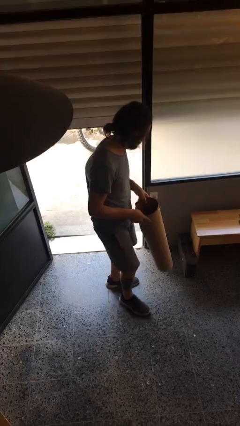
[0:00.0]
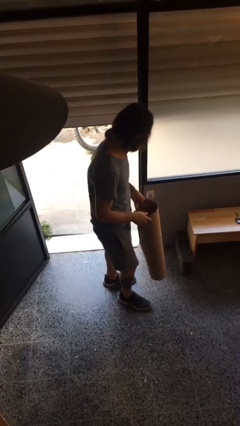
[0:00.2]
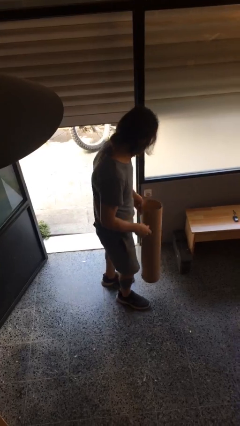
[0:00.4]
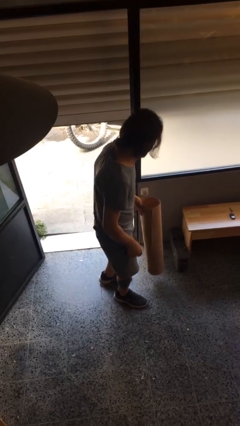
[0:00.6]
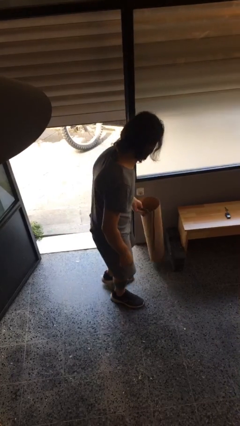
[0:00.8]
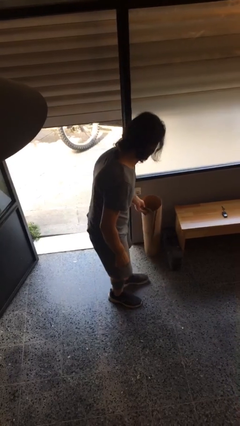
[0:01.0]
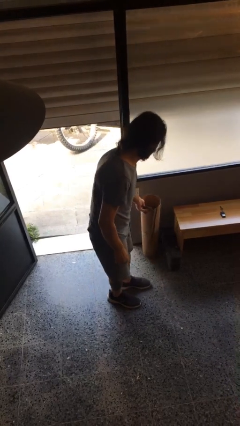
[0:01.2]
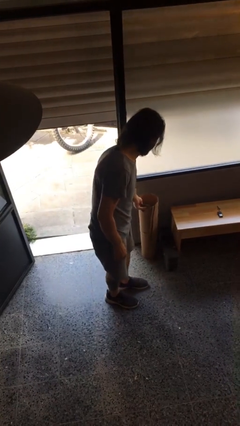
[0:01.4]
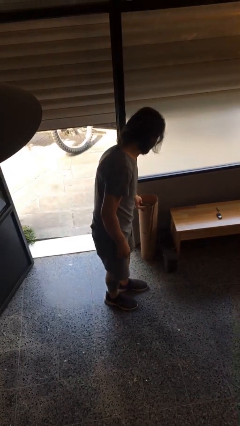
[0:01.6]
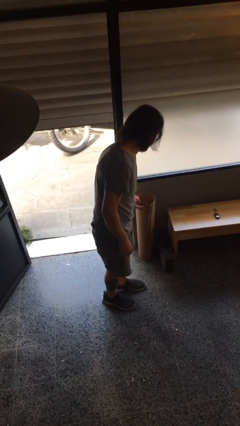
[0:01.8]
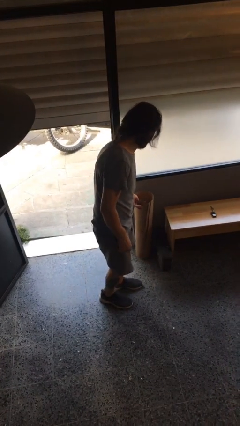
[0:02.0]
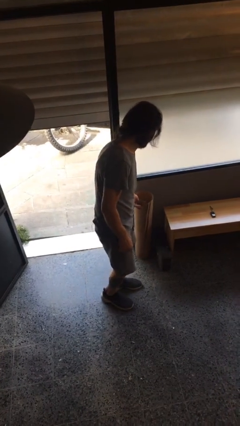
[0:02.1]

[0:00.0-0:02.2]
person puts down object on floor

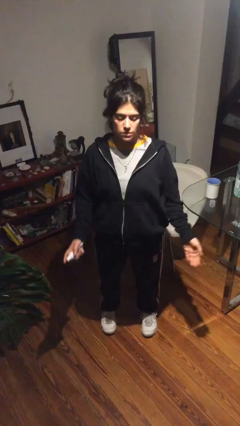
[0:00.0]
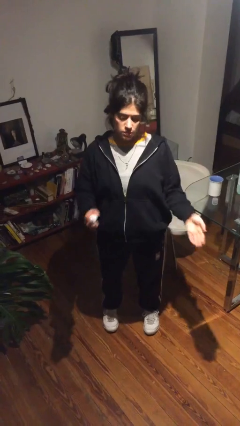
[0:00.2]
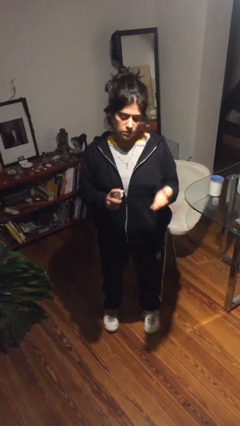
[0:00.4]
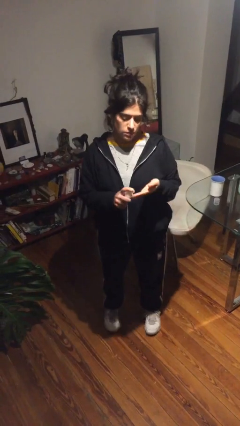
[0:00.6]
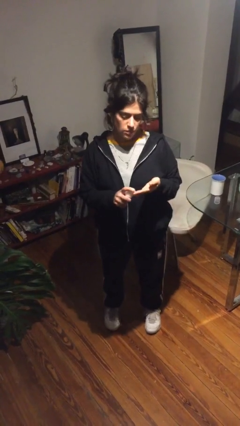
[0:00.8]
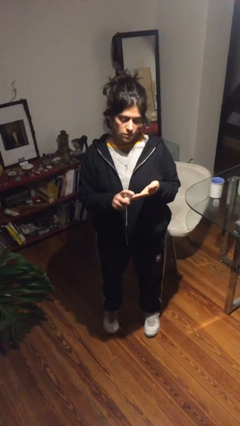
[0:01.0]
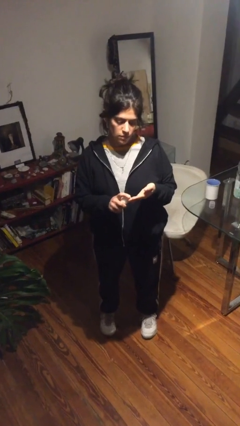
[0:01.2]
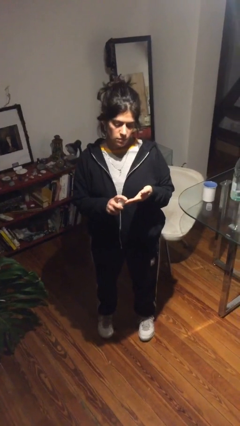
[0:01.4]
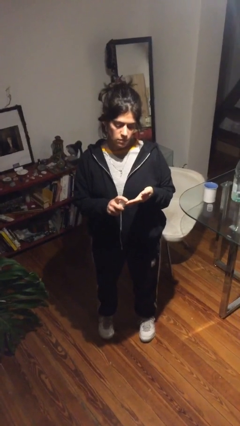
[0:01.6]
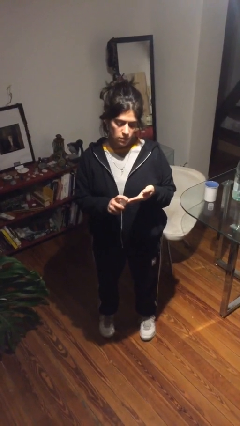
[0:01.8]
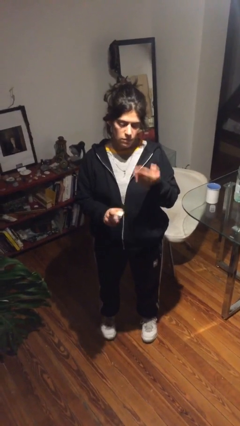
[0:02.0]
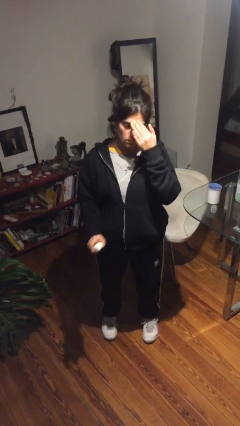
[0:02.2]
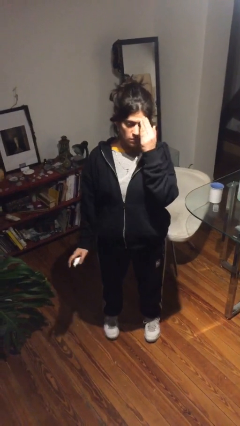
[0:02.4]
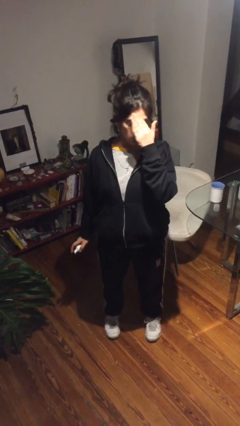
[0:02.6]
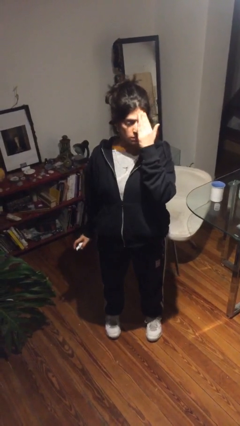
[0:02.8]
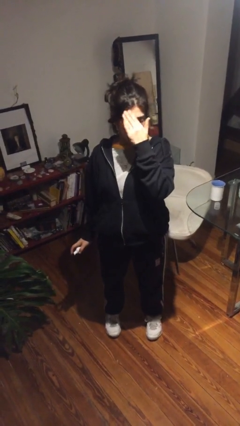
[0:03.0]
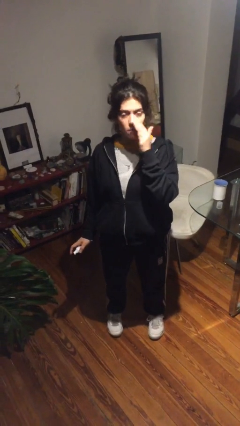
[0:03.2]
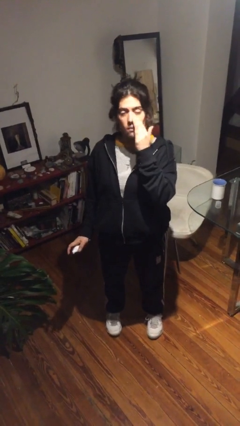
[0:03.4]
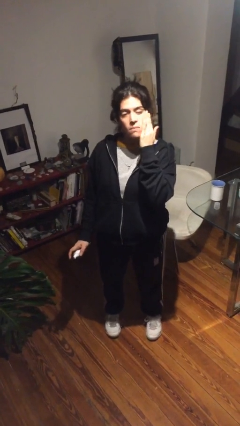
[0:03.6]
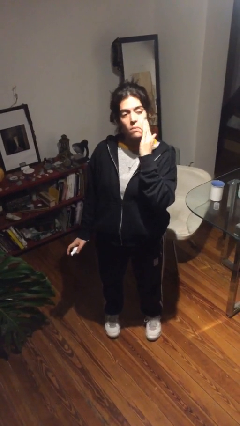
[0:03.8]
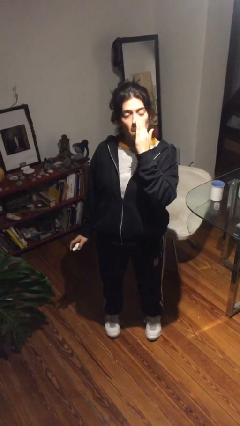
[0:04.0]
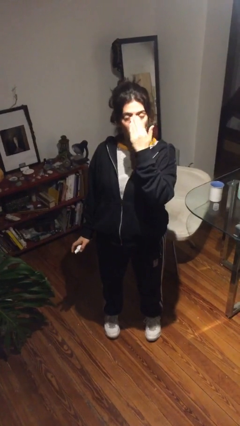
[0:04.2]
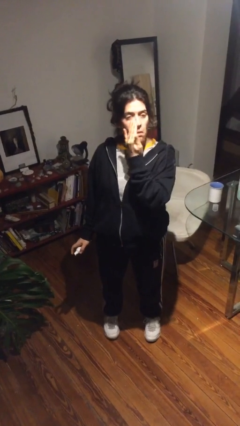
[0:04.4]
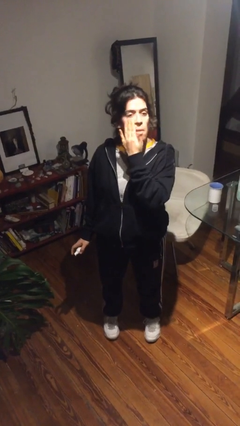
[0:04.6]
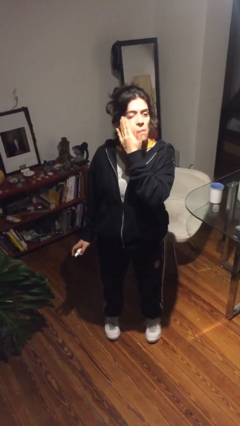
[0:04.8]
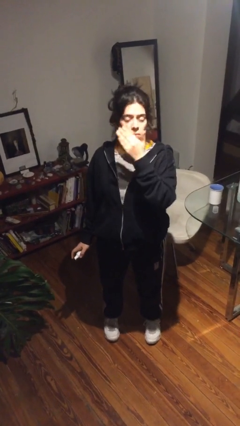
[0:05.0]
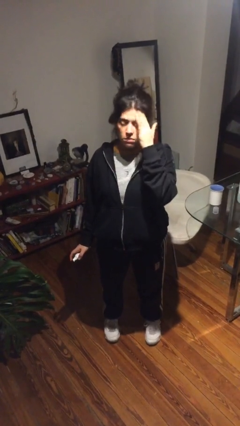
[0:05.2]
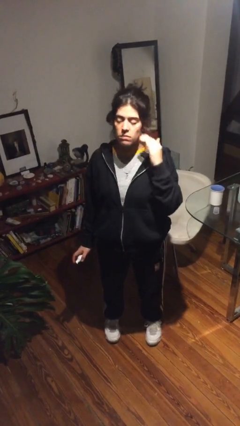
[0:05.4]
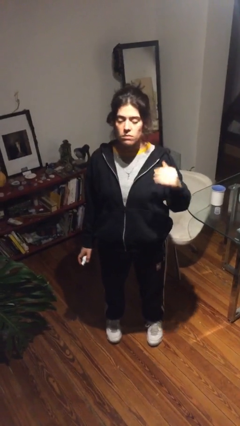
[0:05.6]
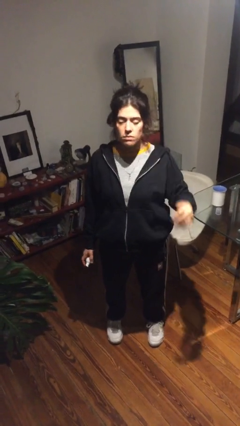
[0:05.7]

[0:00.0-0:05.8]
person applies facial moisturizer

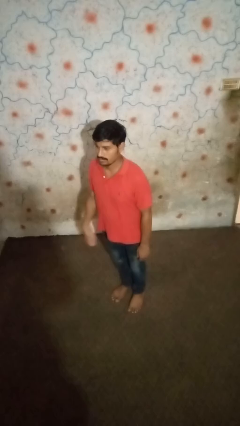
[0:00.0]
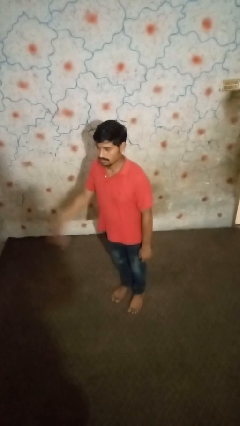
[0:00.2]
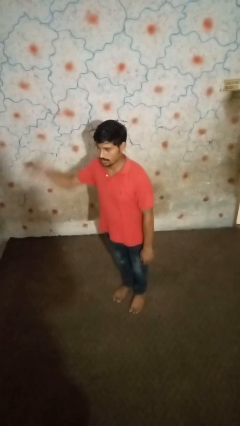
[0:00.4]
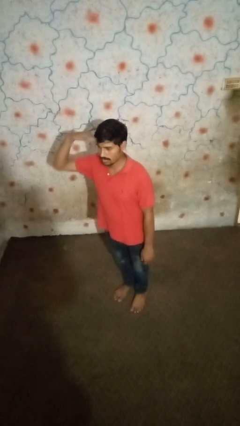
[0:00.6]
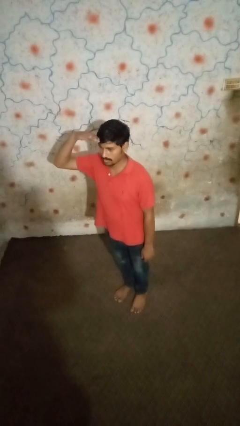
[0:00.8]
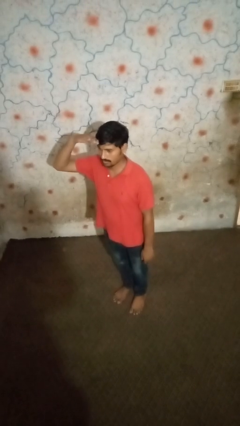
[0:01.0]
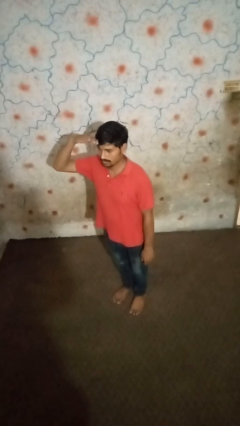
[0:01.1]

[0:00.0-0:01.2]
person salutes

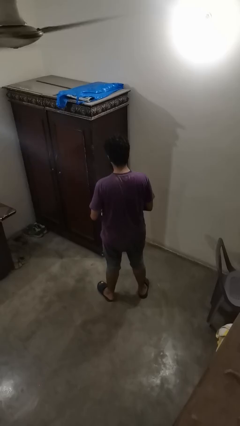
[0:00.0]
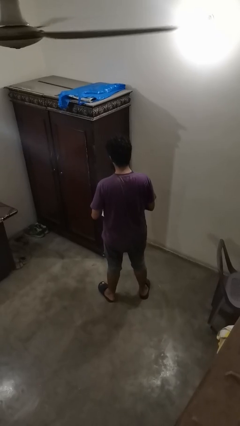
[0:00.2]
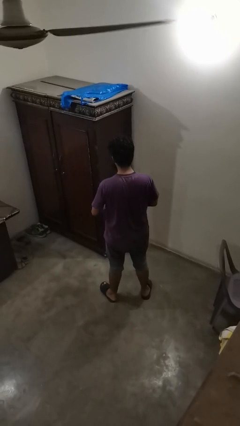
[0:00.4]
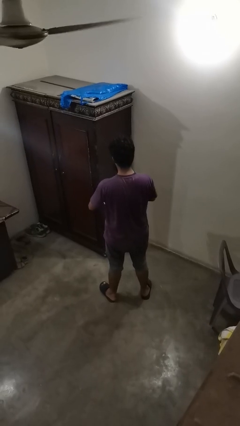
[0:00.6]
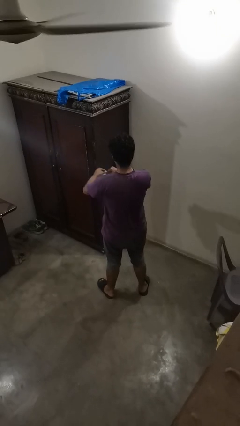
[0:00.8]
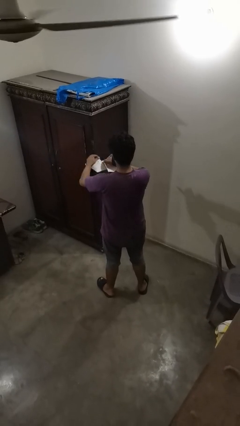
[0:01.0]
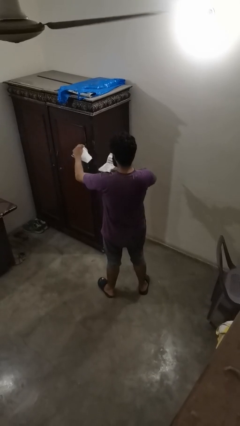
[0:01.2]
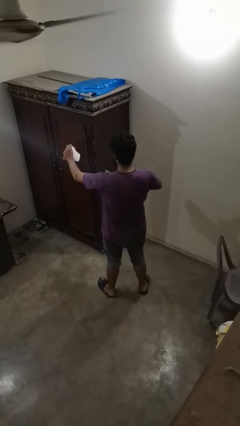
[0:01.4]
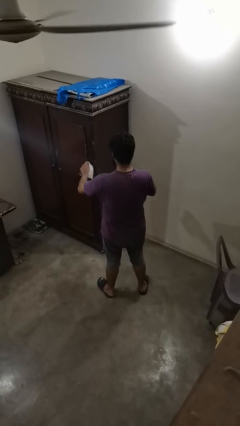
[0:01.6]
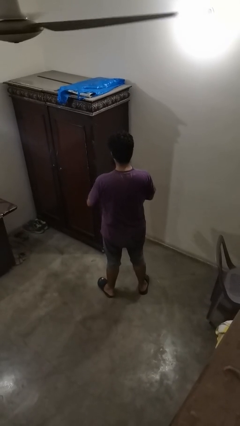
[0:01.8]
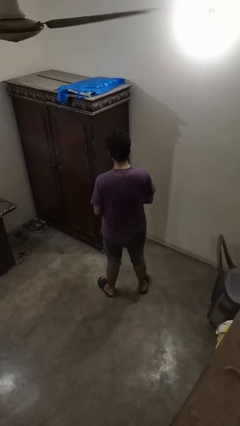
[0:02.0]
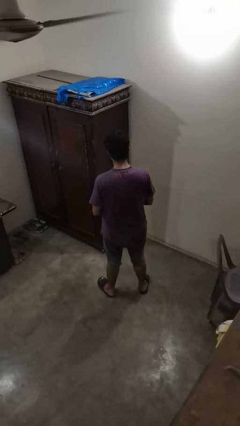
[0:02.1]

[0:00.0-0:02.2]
person tears paper

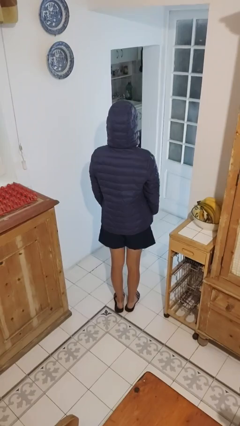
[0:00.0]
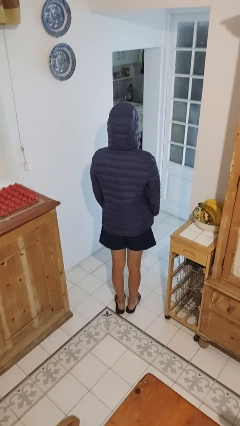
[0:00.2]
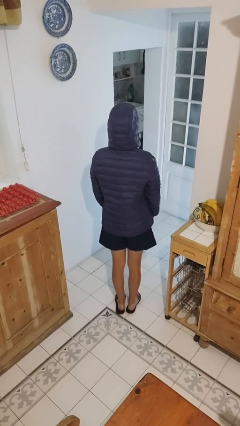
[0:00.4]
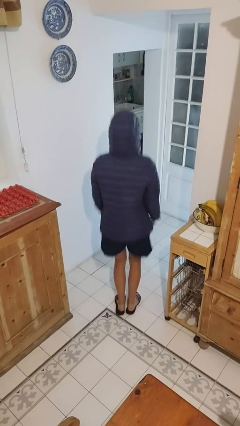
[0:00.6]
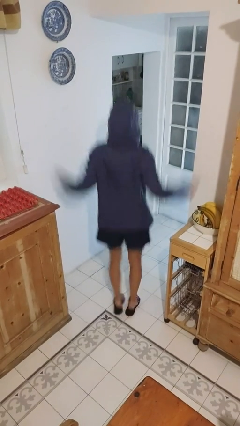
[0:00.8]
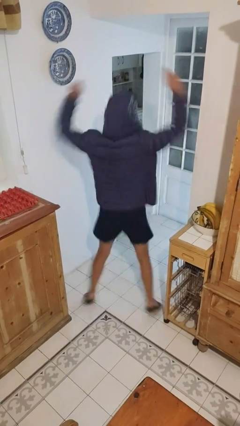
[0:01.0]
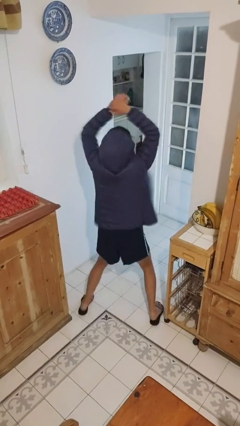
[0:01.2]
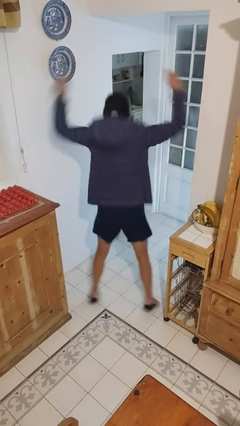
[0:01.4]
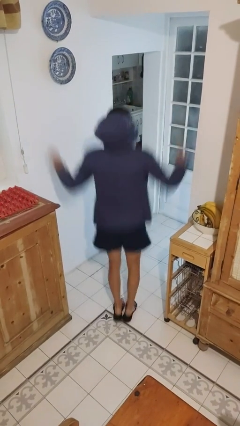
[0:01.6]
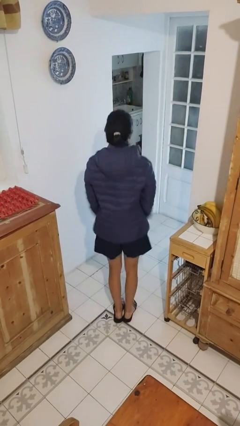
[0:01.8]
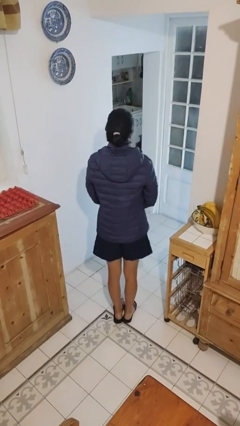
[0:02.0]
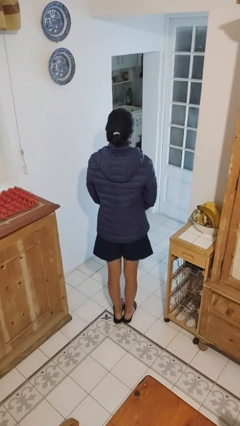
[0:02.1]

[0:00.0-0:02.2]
person exercises with jumping jacks

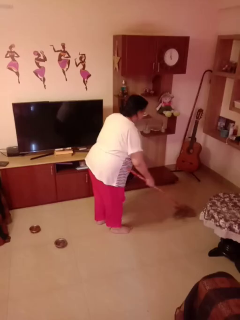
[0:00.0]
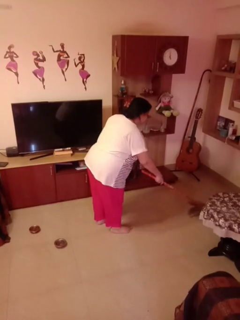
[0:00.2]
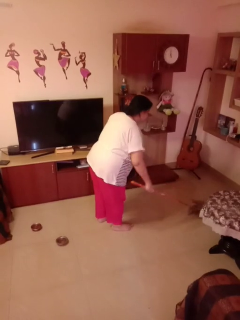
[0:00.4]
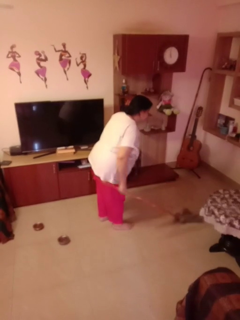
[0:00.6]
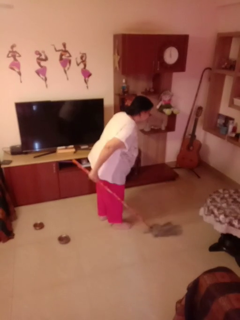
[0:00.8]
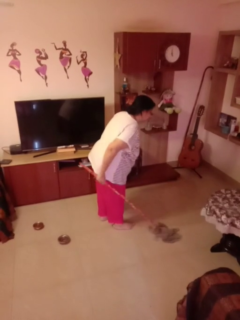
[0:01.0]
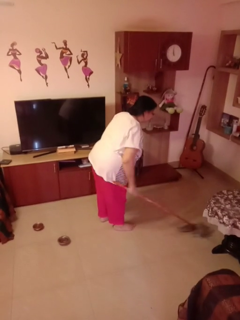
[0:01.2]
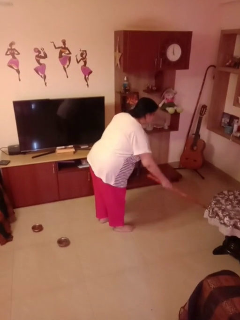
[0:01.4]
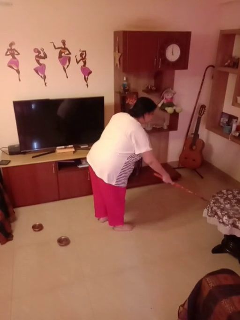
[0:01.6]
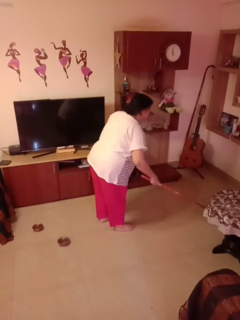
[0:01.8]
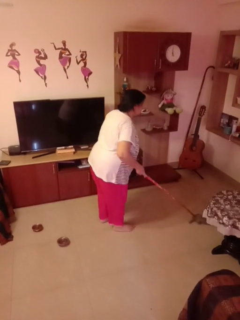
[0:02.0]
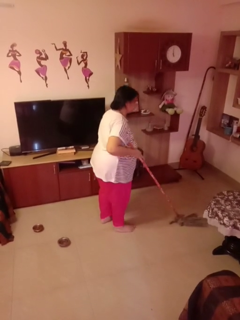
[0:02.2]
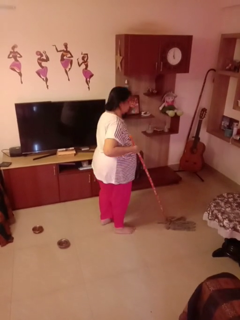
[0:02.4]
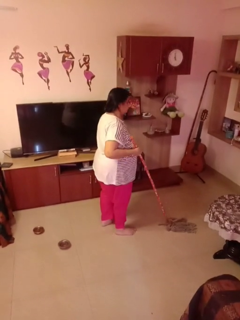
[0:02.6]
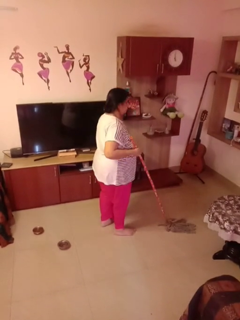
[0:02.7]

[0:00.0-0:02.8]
person mops

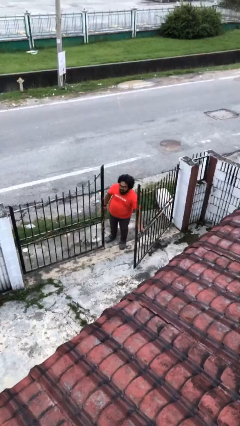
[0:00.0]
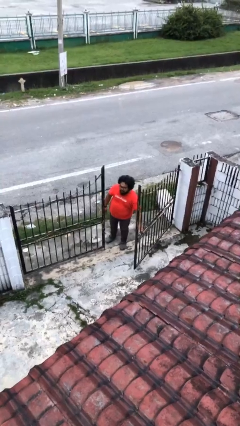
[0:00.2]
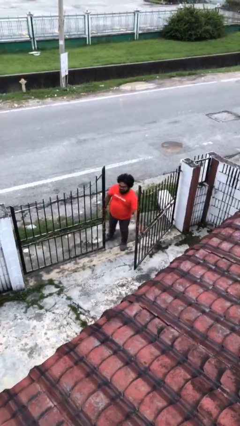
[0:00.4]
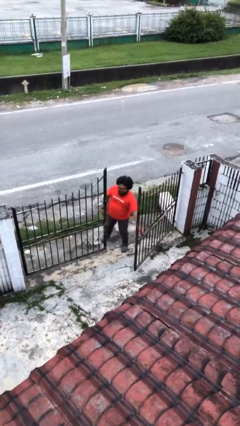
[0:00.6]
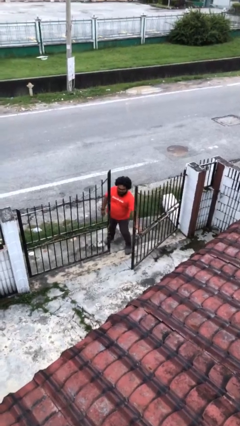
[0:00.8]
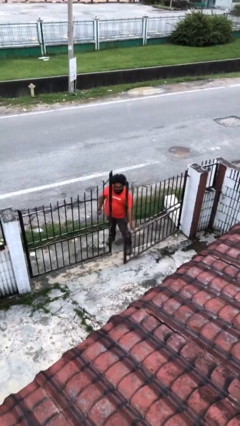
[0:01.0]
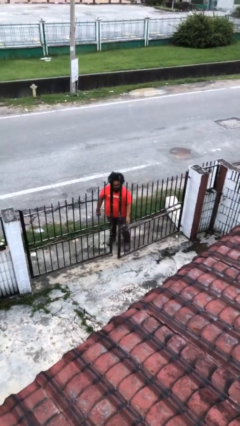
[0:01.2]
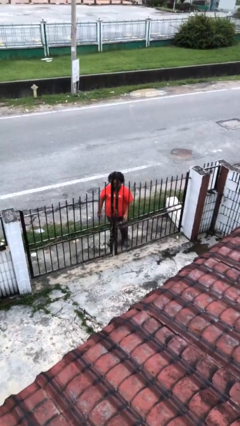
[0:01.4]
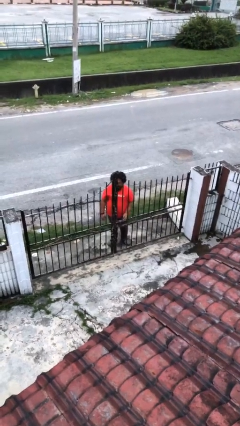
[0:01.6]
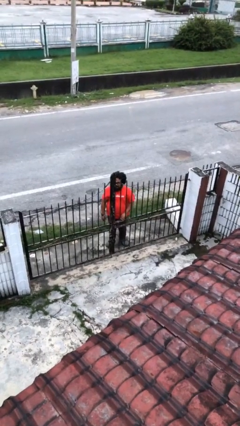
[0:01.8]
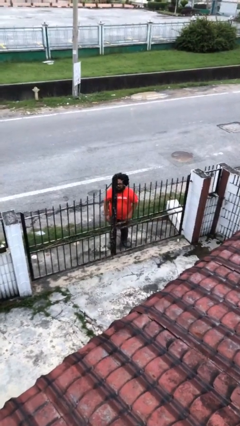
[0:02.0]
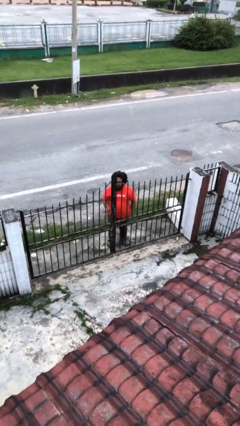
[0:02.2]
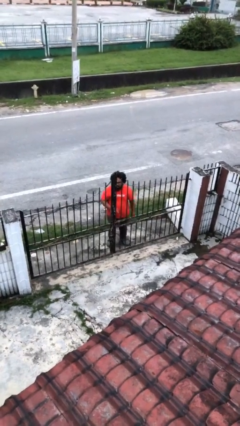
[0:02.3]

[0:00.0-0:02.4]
person closes facility door
